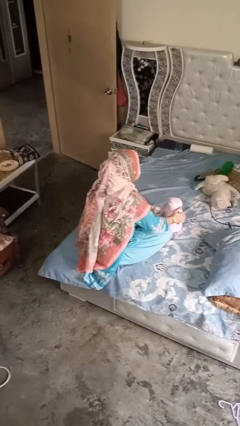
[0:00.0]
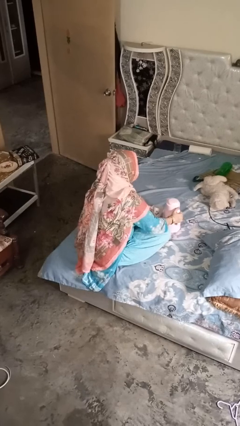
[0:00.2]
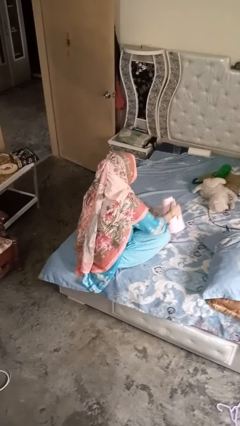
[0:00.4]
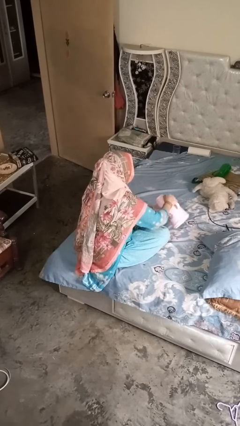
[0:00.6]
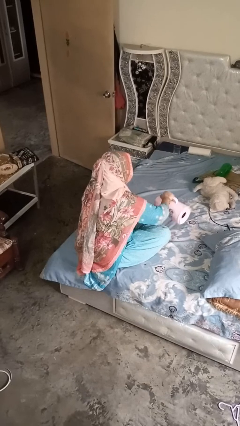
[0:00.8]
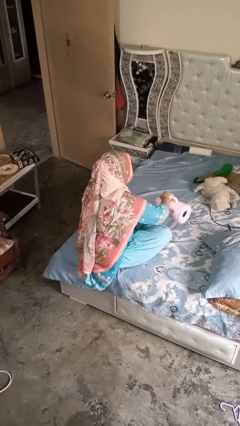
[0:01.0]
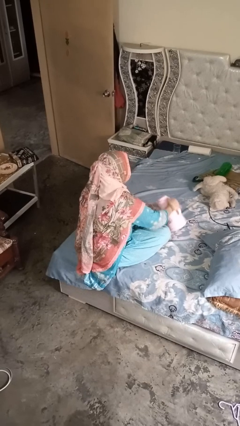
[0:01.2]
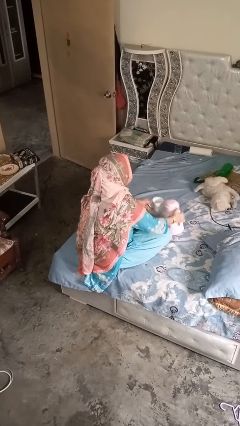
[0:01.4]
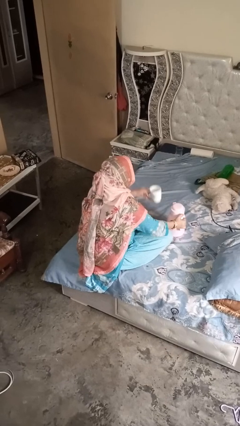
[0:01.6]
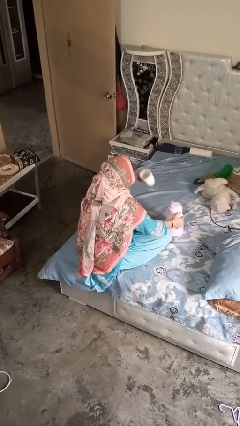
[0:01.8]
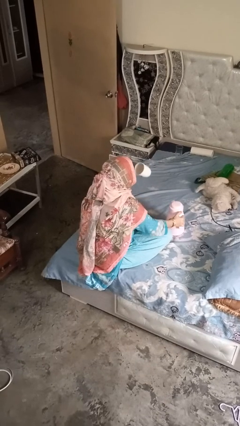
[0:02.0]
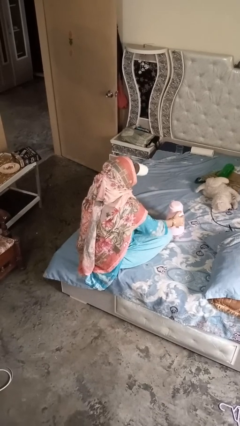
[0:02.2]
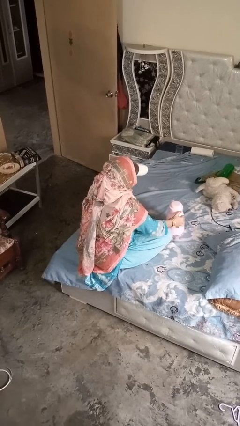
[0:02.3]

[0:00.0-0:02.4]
person pours coffee into mug

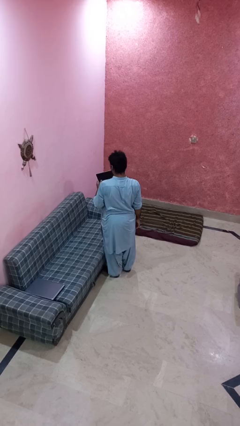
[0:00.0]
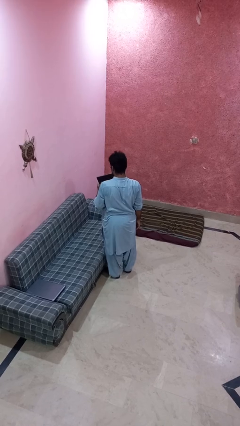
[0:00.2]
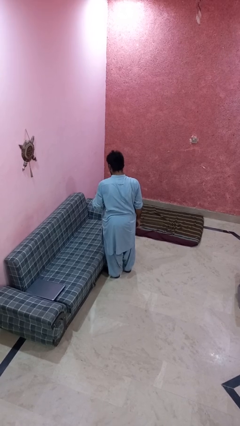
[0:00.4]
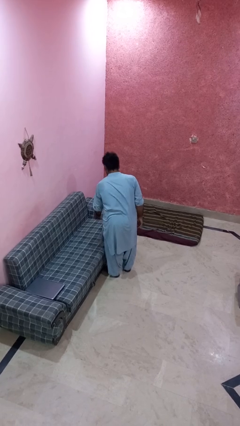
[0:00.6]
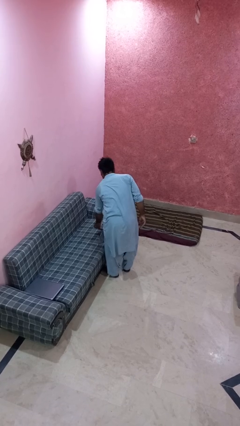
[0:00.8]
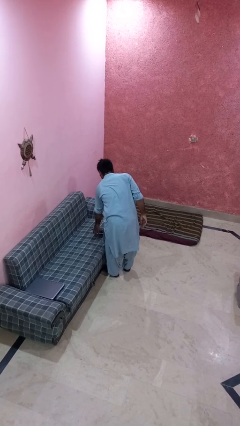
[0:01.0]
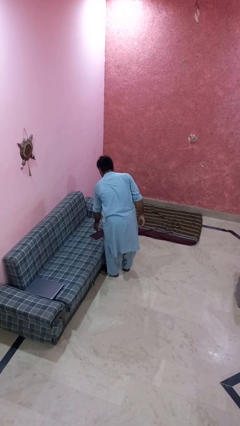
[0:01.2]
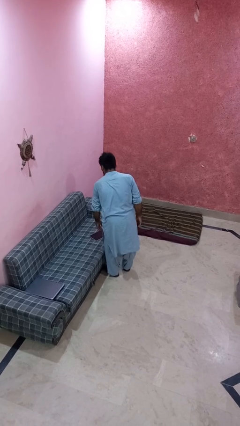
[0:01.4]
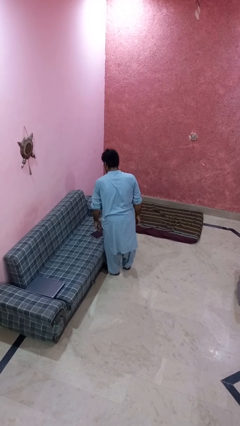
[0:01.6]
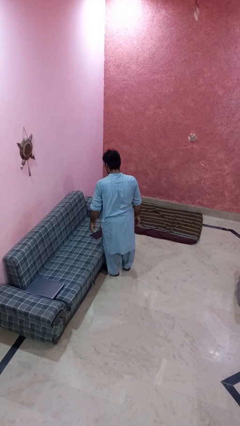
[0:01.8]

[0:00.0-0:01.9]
person puts down object on couch

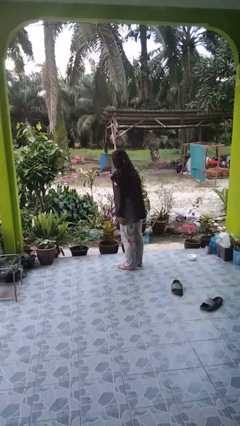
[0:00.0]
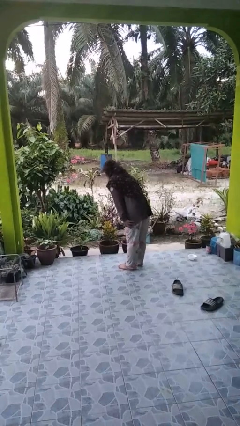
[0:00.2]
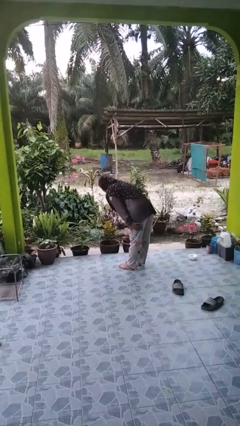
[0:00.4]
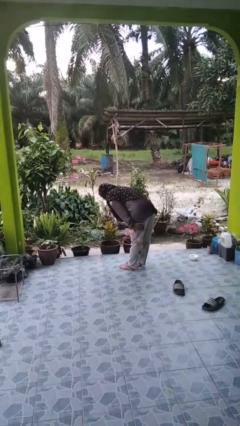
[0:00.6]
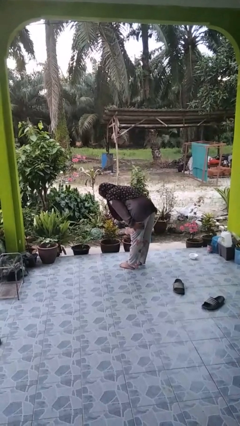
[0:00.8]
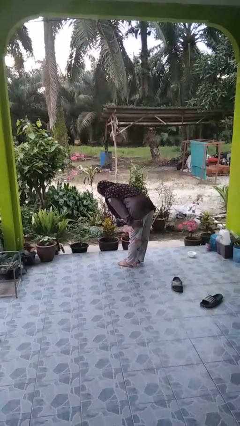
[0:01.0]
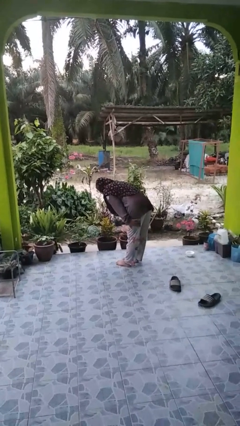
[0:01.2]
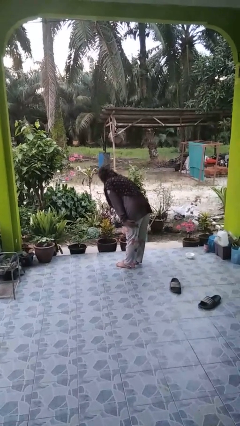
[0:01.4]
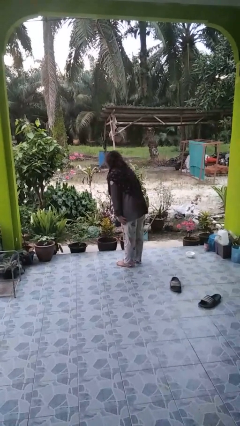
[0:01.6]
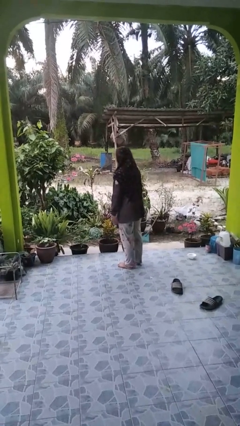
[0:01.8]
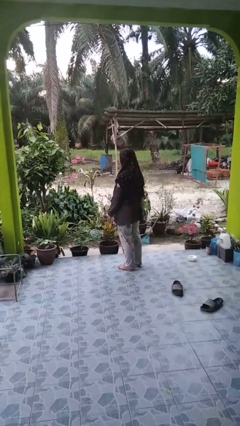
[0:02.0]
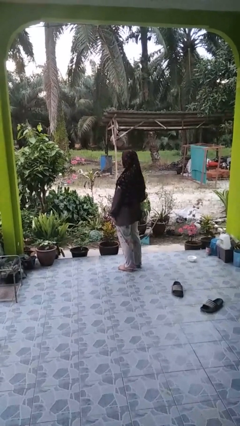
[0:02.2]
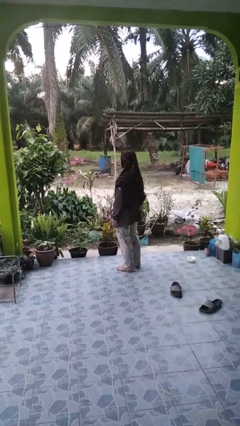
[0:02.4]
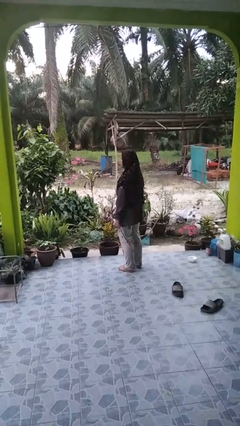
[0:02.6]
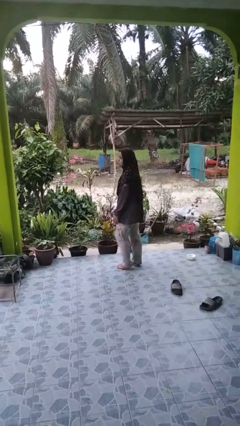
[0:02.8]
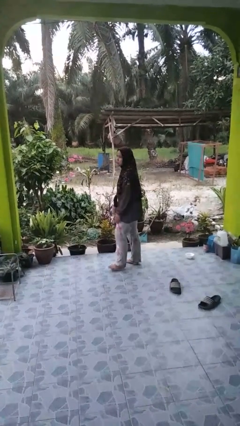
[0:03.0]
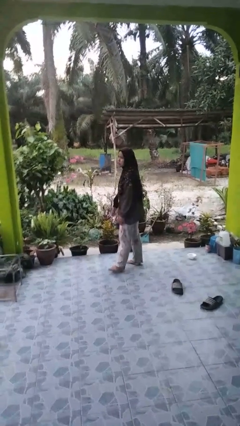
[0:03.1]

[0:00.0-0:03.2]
person bows

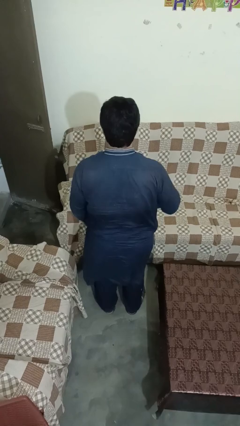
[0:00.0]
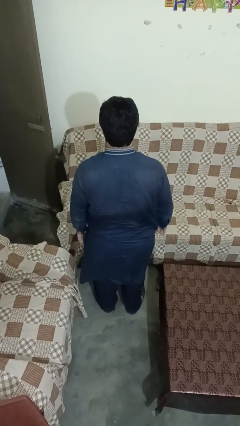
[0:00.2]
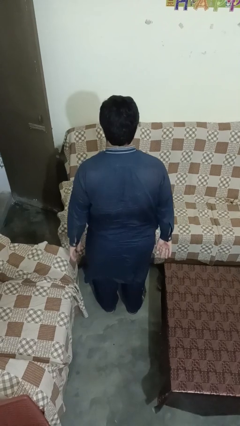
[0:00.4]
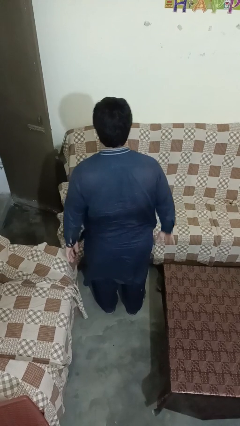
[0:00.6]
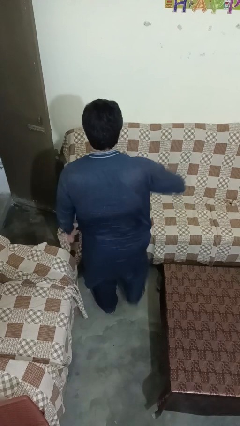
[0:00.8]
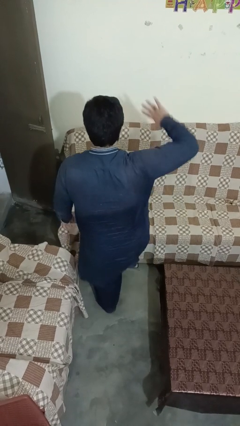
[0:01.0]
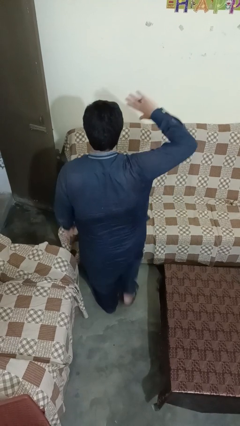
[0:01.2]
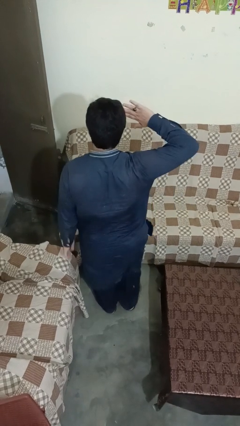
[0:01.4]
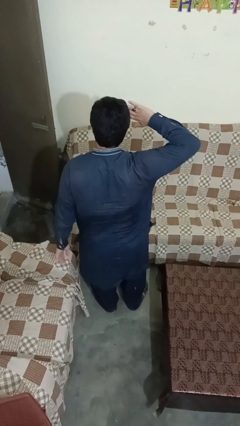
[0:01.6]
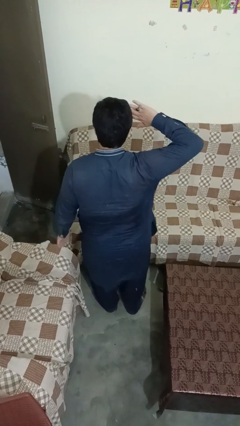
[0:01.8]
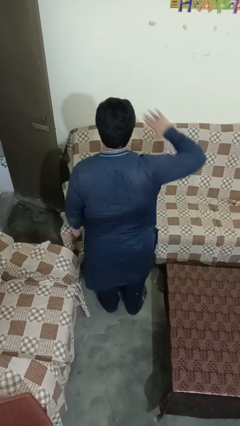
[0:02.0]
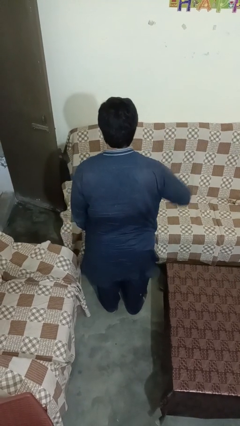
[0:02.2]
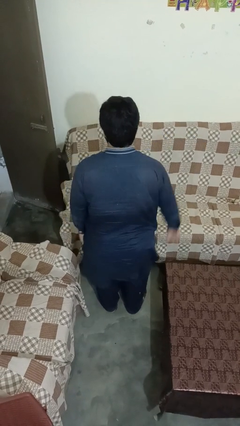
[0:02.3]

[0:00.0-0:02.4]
person salutes

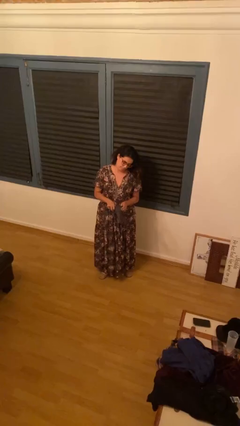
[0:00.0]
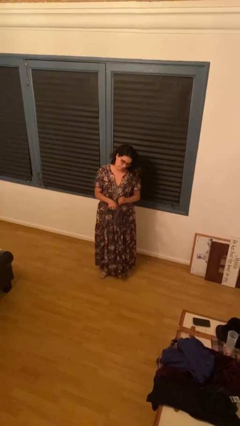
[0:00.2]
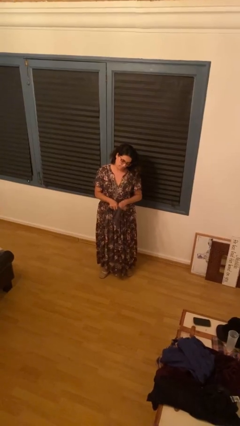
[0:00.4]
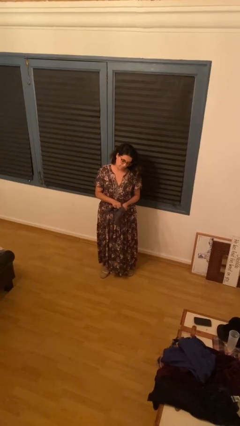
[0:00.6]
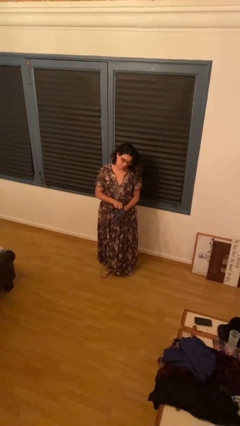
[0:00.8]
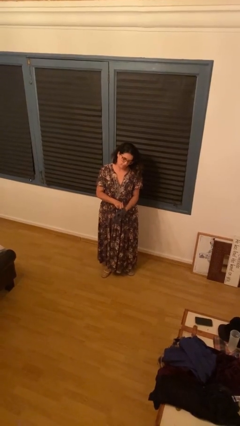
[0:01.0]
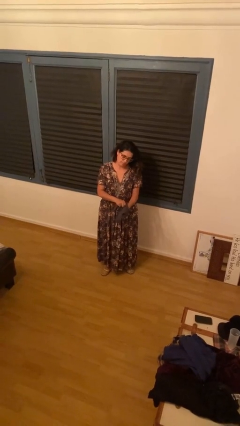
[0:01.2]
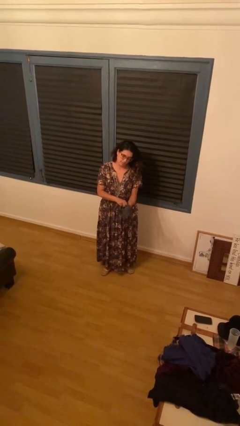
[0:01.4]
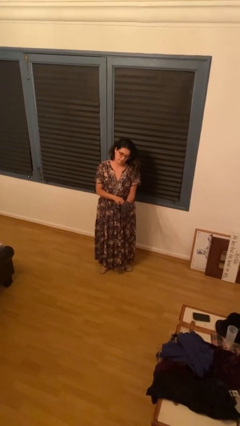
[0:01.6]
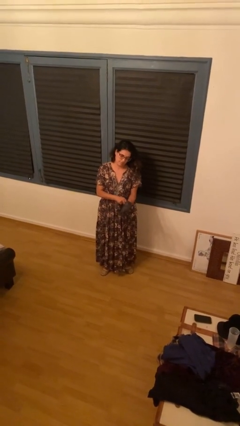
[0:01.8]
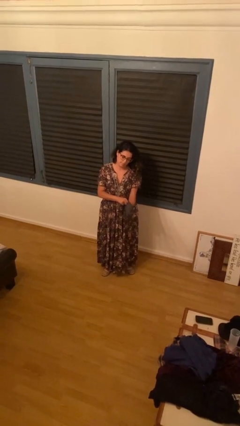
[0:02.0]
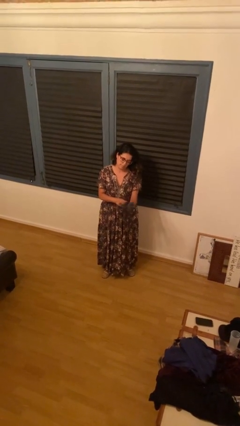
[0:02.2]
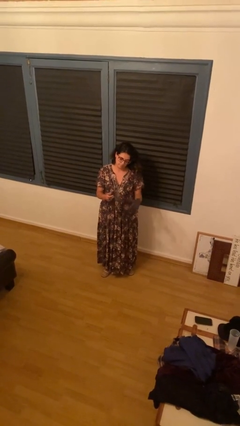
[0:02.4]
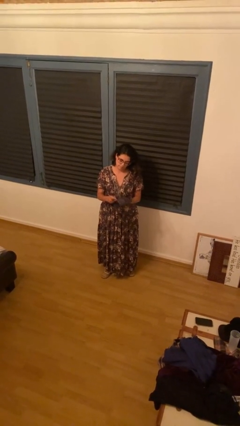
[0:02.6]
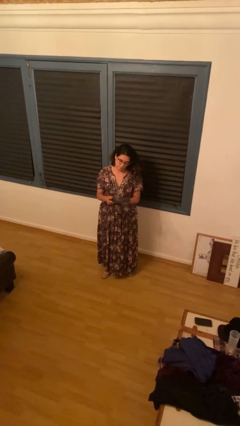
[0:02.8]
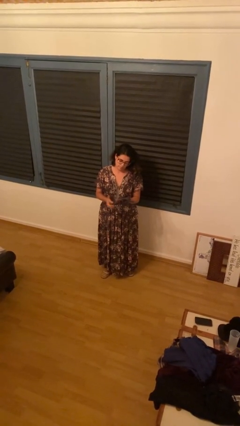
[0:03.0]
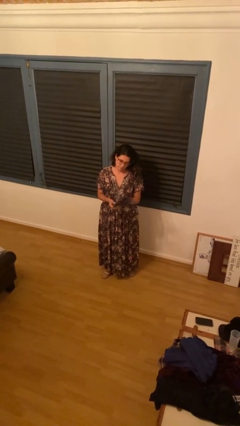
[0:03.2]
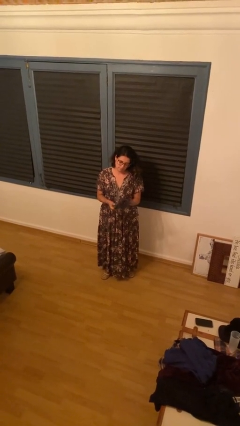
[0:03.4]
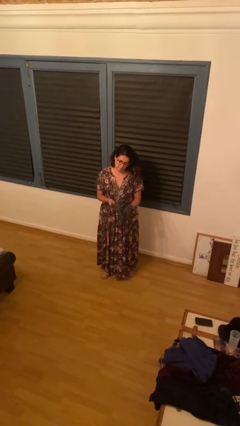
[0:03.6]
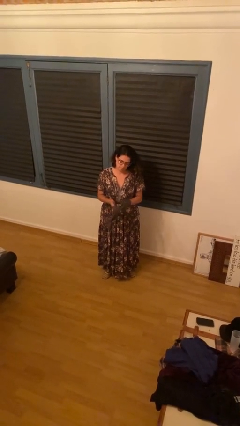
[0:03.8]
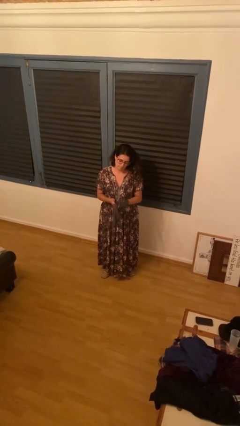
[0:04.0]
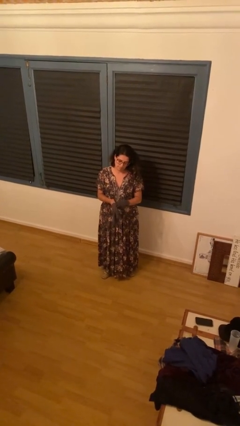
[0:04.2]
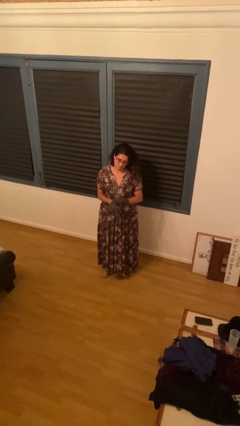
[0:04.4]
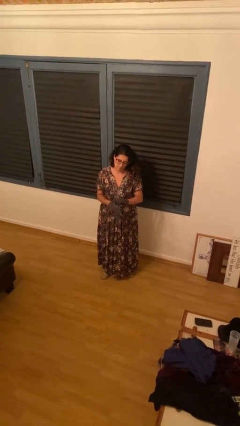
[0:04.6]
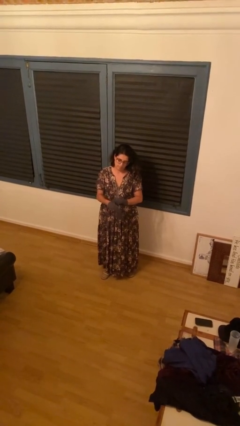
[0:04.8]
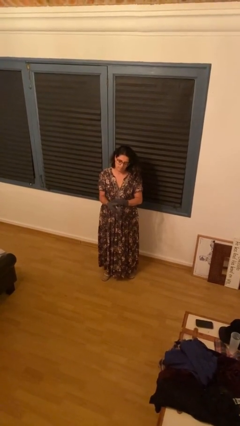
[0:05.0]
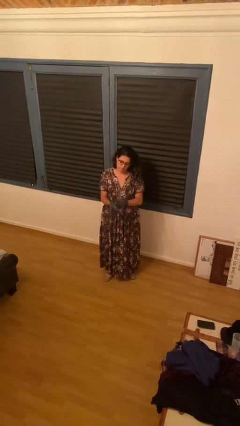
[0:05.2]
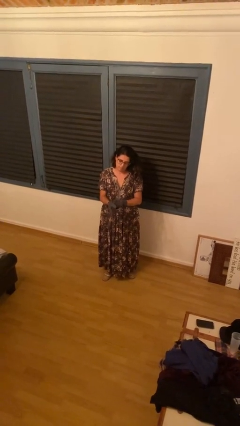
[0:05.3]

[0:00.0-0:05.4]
person puts on gloves

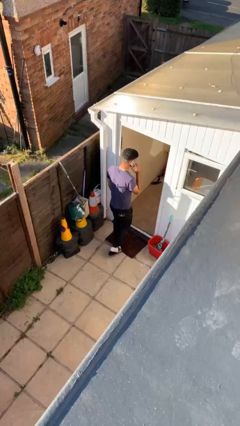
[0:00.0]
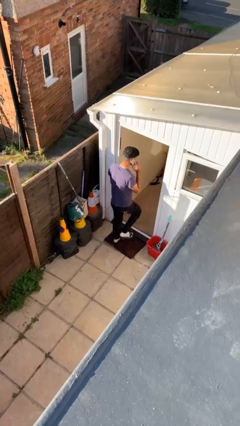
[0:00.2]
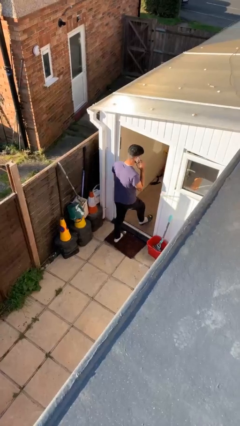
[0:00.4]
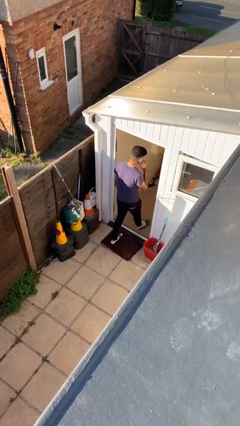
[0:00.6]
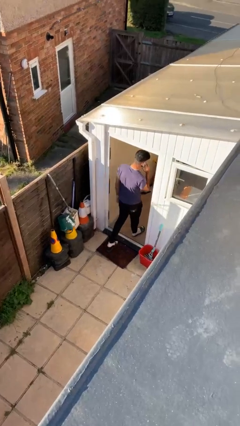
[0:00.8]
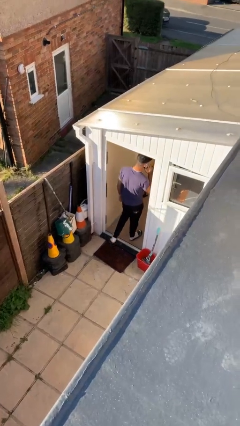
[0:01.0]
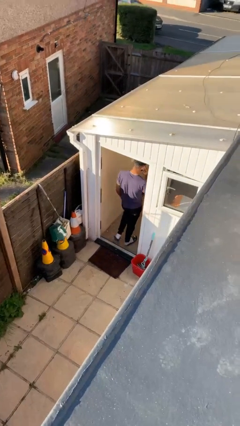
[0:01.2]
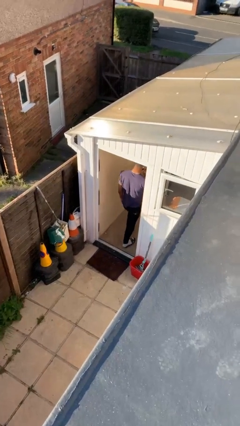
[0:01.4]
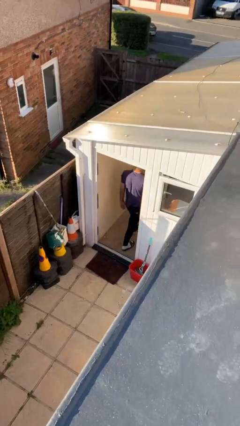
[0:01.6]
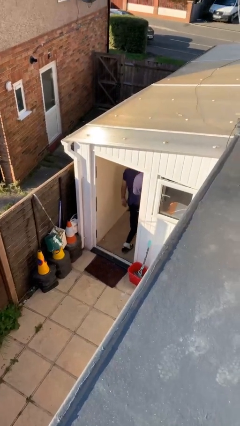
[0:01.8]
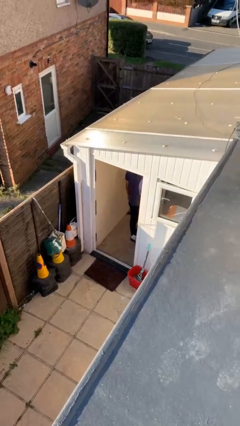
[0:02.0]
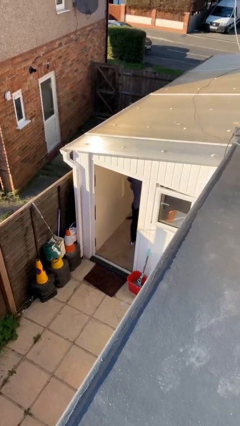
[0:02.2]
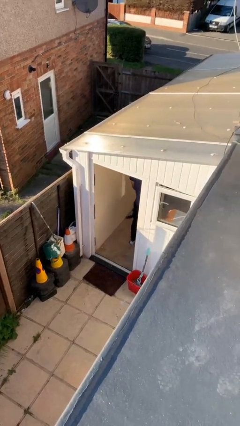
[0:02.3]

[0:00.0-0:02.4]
person exits scene through structure
